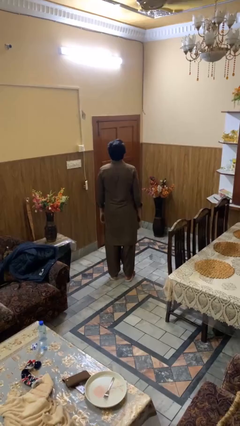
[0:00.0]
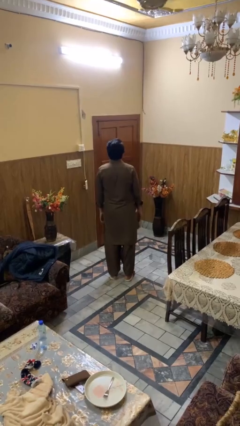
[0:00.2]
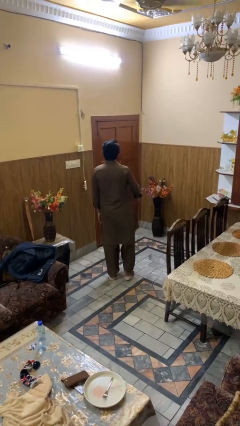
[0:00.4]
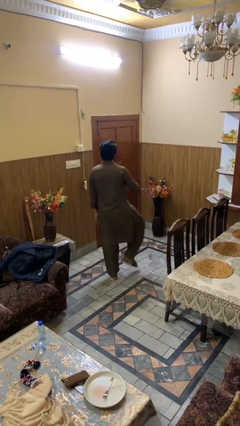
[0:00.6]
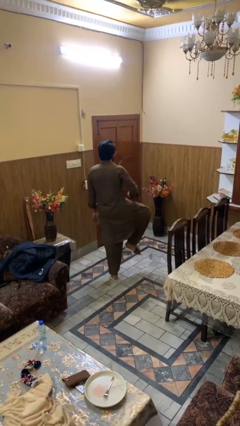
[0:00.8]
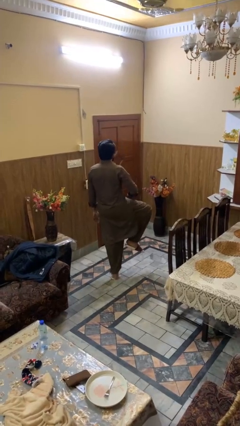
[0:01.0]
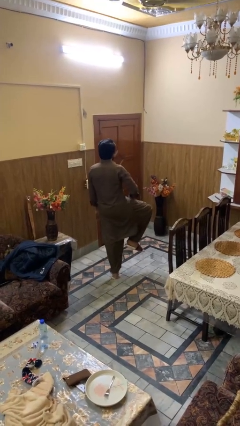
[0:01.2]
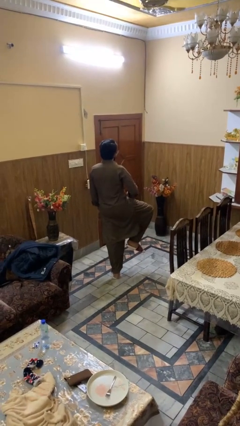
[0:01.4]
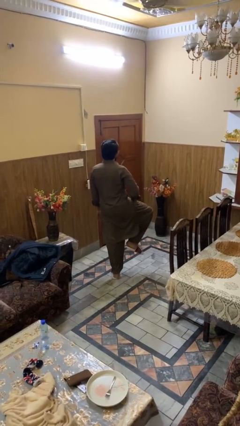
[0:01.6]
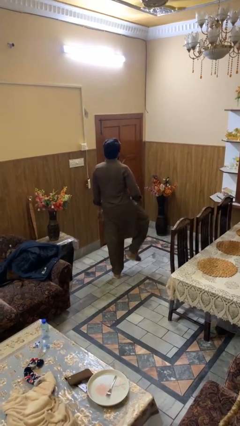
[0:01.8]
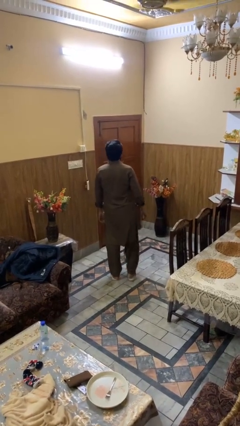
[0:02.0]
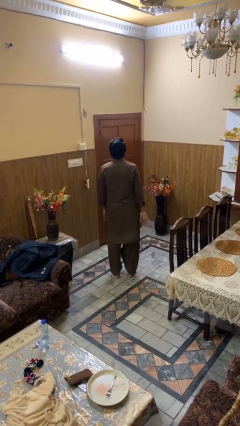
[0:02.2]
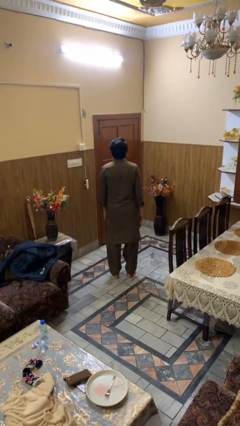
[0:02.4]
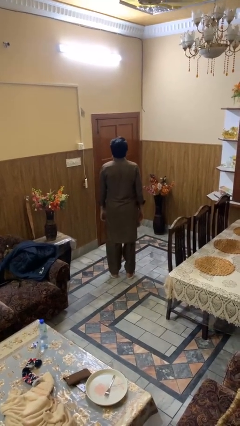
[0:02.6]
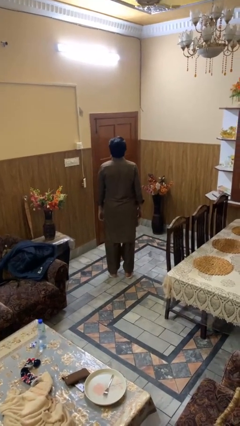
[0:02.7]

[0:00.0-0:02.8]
person slaps hands on thighs

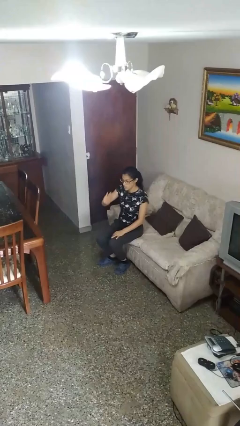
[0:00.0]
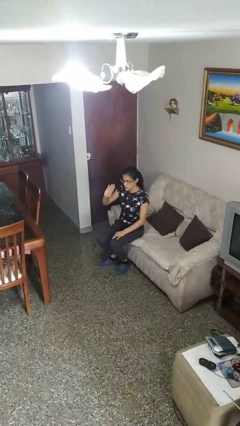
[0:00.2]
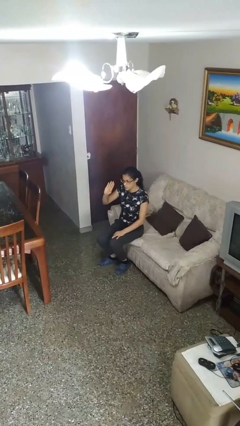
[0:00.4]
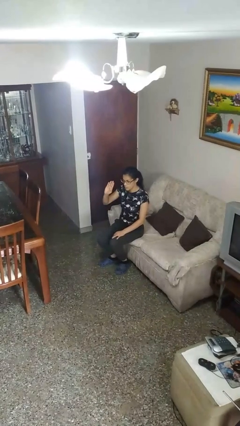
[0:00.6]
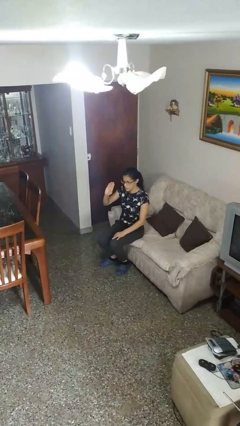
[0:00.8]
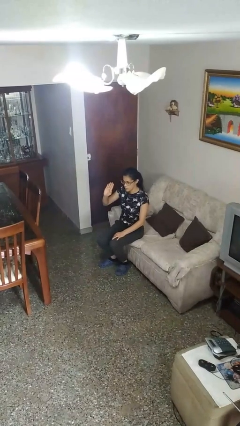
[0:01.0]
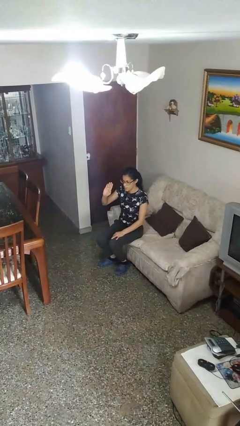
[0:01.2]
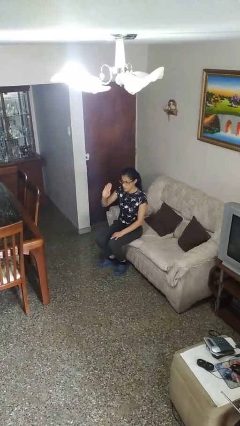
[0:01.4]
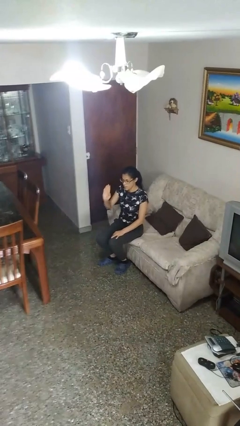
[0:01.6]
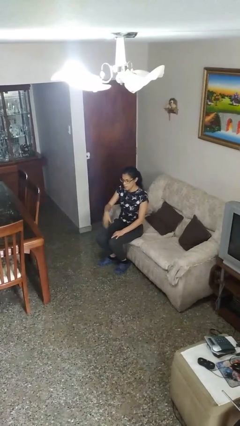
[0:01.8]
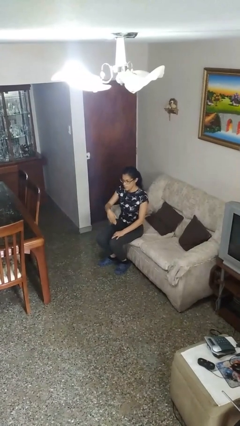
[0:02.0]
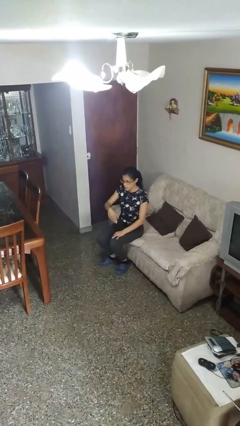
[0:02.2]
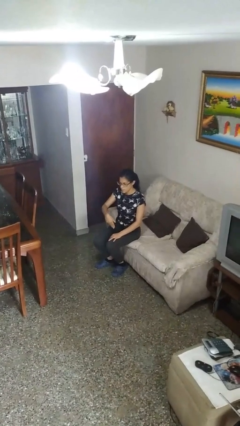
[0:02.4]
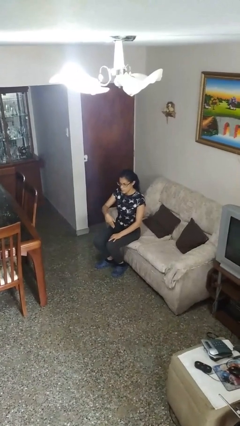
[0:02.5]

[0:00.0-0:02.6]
person gestures swipe up

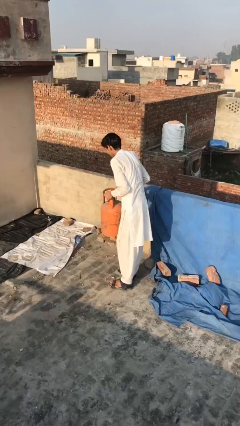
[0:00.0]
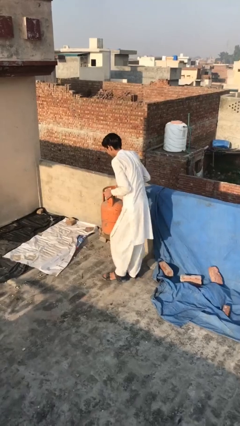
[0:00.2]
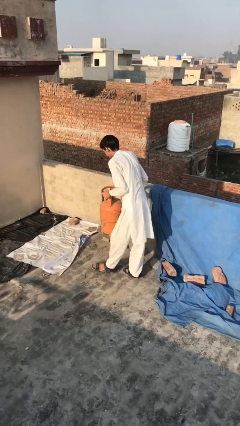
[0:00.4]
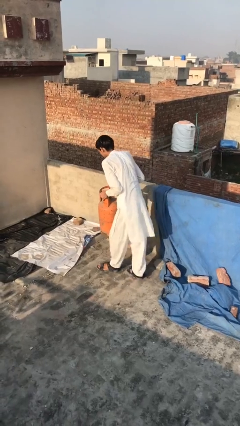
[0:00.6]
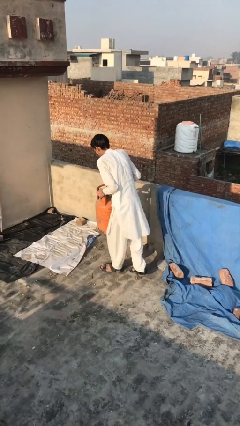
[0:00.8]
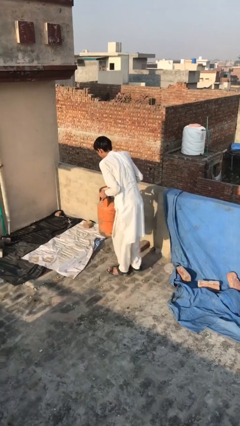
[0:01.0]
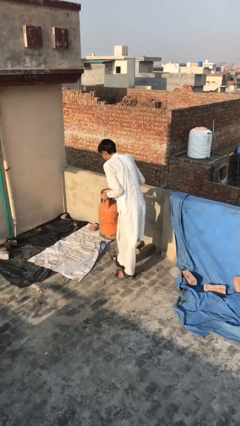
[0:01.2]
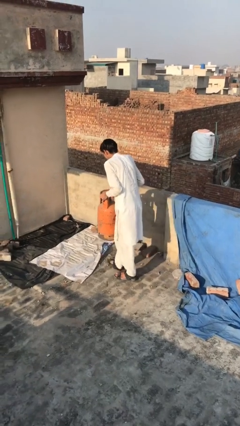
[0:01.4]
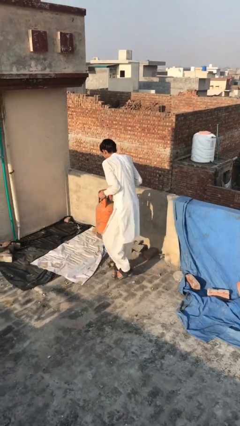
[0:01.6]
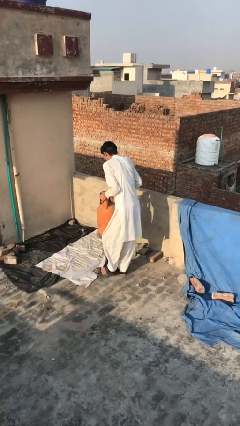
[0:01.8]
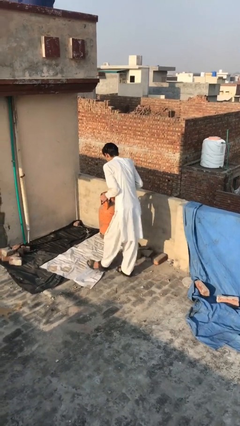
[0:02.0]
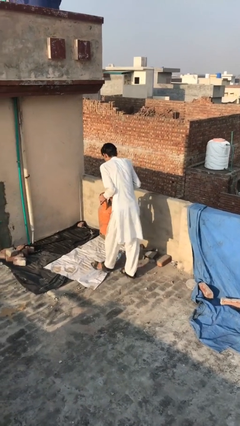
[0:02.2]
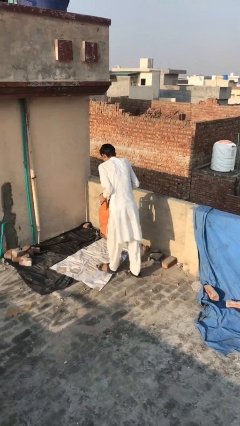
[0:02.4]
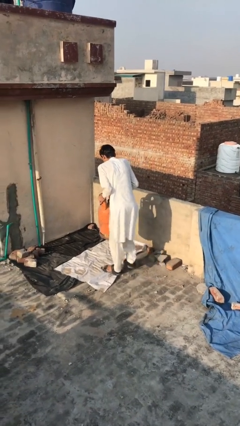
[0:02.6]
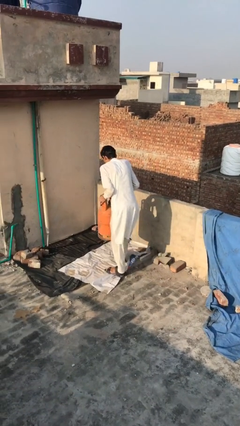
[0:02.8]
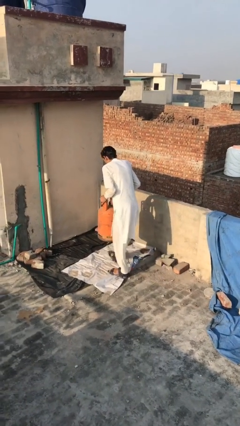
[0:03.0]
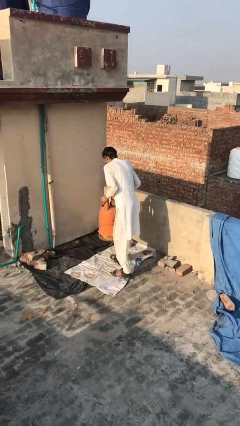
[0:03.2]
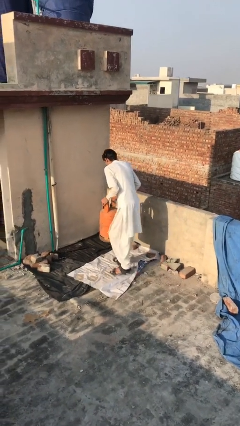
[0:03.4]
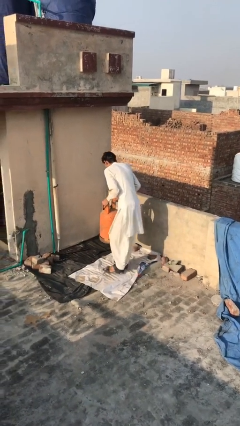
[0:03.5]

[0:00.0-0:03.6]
person carries heavy object

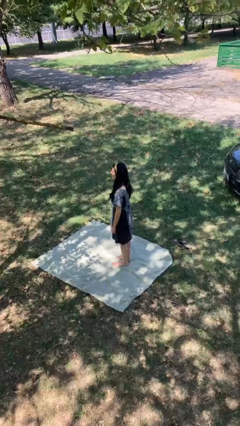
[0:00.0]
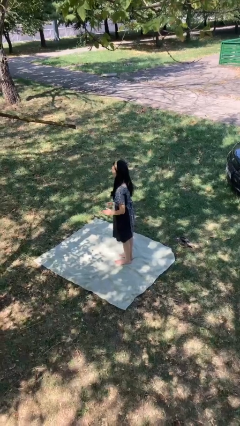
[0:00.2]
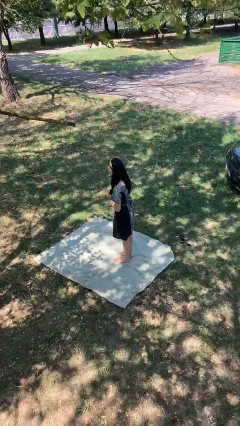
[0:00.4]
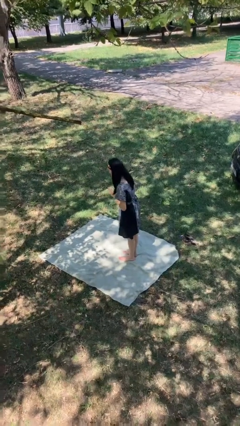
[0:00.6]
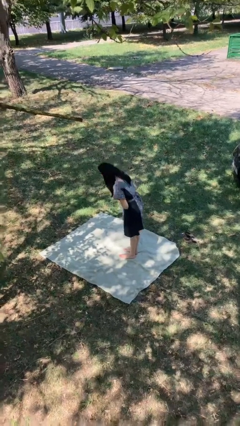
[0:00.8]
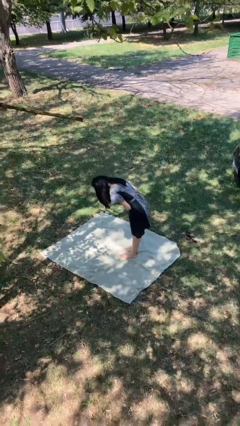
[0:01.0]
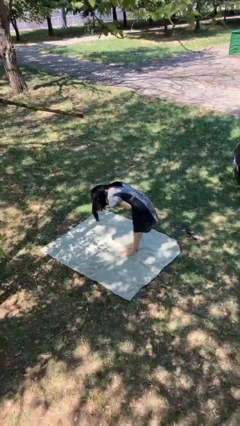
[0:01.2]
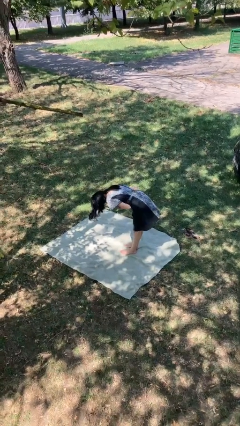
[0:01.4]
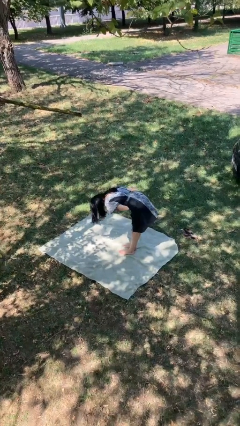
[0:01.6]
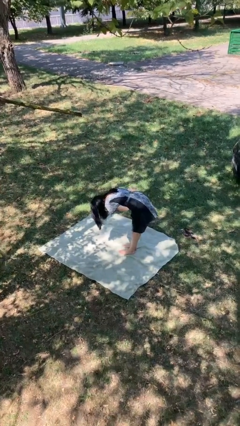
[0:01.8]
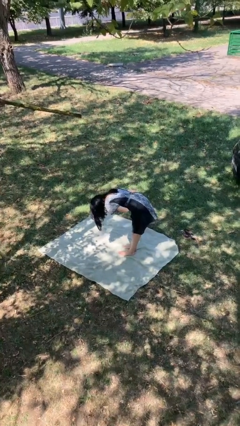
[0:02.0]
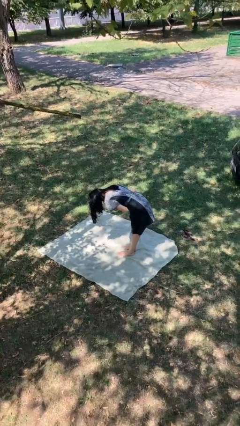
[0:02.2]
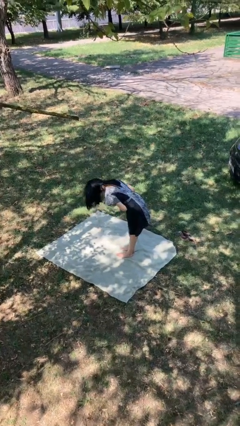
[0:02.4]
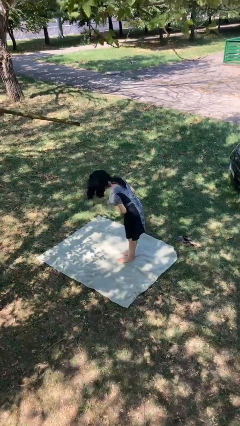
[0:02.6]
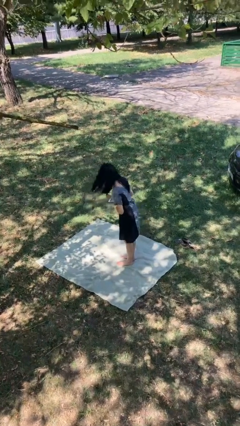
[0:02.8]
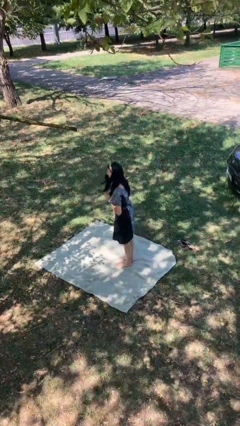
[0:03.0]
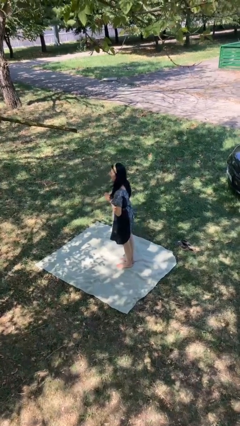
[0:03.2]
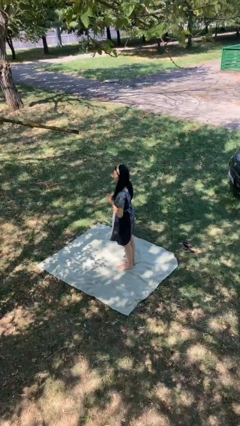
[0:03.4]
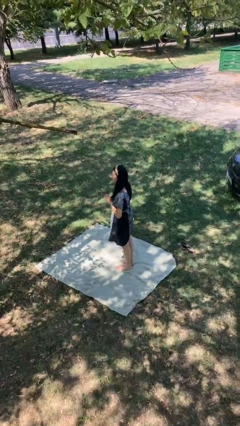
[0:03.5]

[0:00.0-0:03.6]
person bows

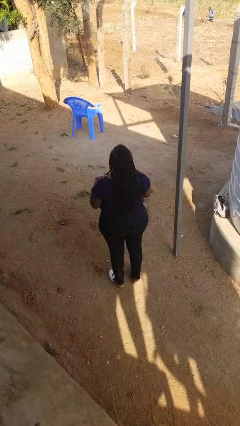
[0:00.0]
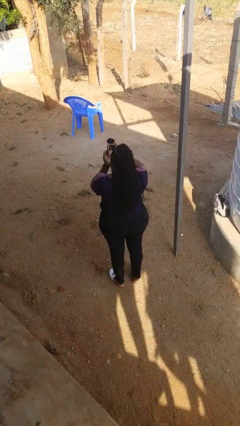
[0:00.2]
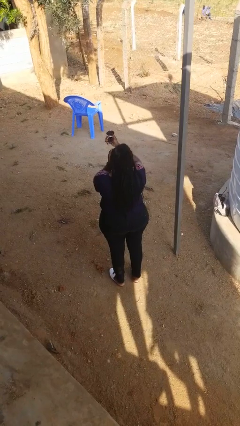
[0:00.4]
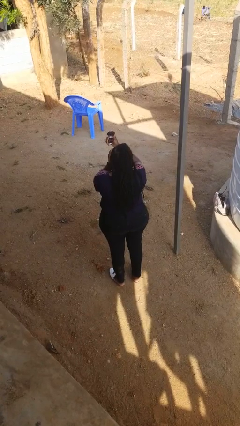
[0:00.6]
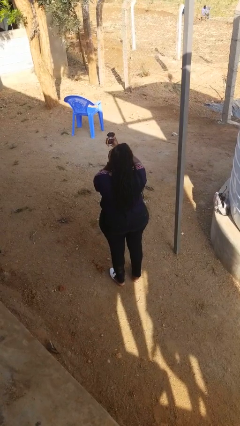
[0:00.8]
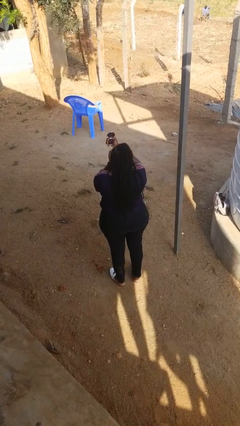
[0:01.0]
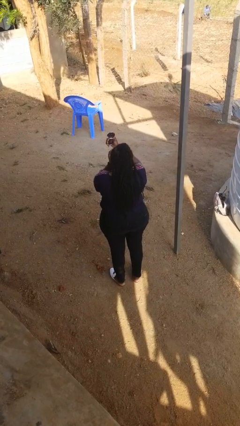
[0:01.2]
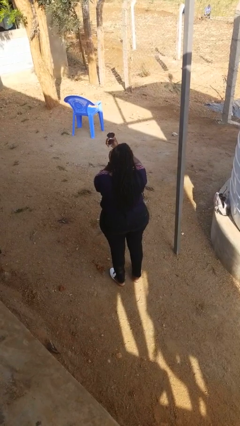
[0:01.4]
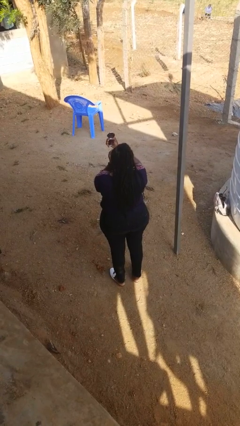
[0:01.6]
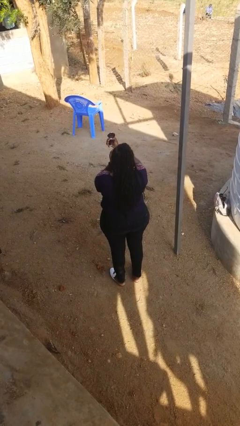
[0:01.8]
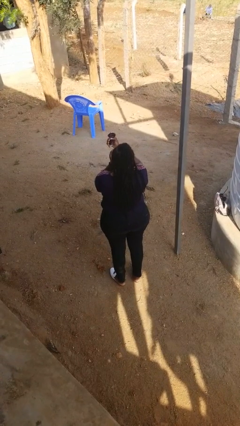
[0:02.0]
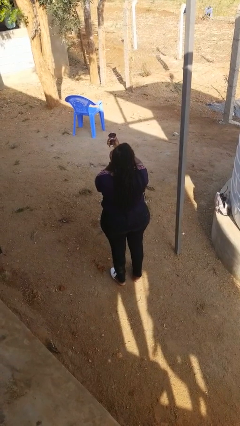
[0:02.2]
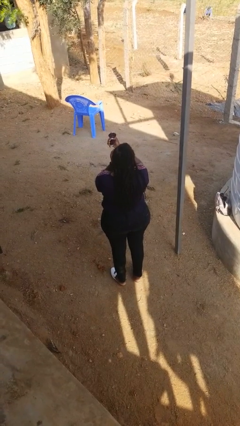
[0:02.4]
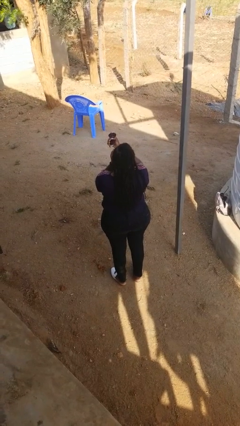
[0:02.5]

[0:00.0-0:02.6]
person applies eye makeup

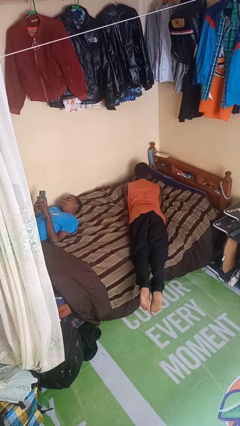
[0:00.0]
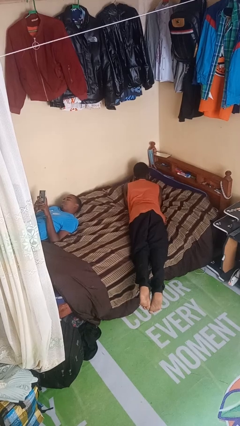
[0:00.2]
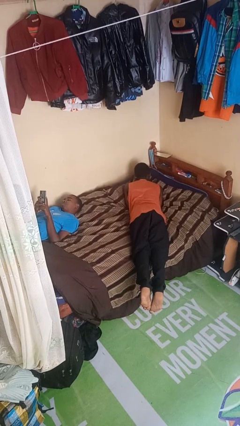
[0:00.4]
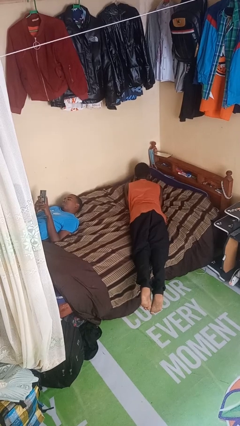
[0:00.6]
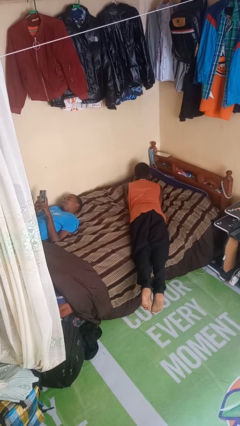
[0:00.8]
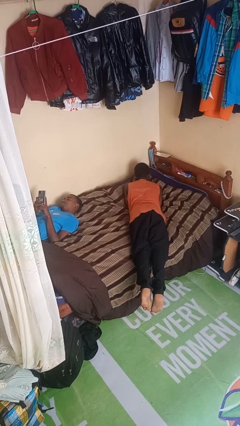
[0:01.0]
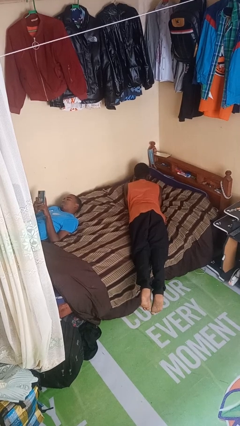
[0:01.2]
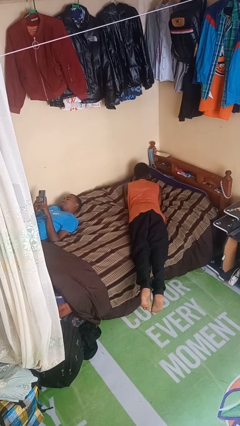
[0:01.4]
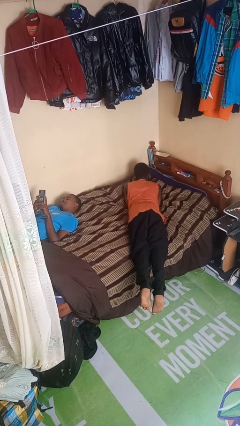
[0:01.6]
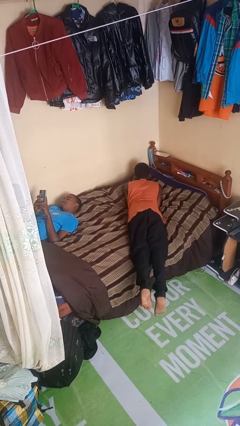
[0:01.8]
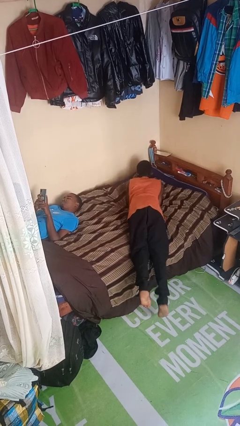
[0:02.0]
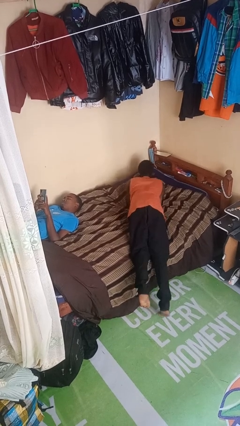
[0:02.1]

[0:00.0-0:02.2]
person lies down on bed
